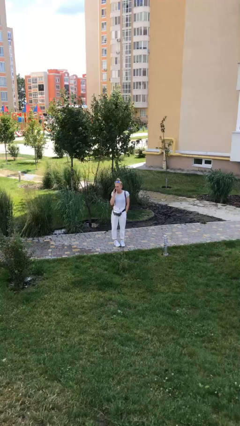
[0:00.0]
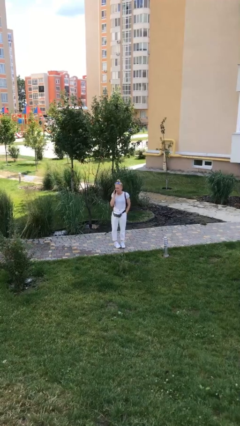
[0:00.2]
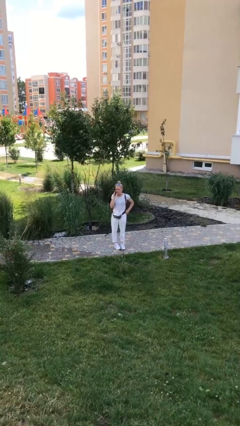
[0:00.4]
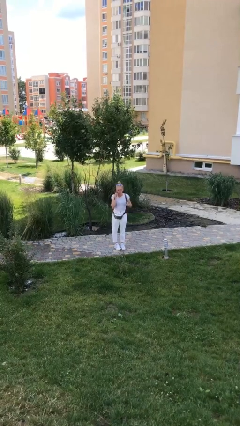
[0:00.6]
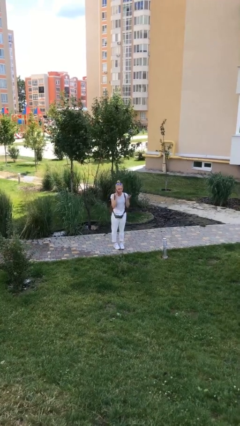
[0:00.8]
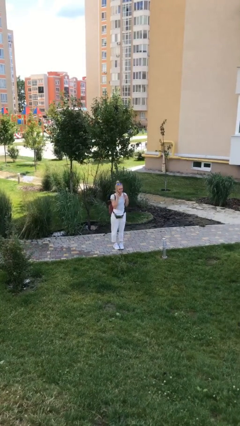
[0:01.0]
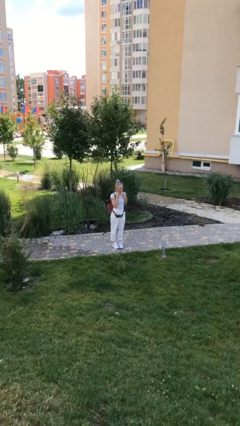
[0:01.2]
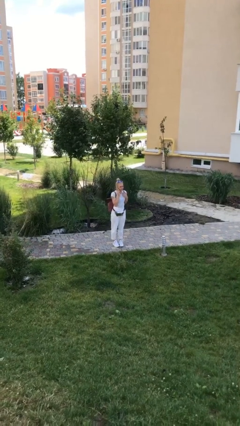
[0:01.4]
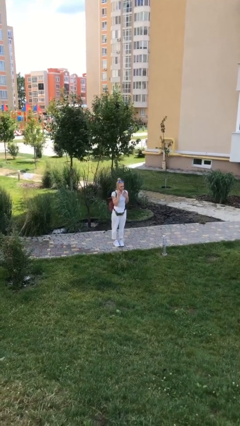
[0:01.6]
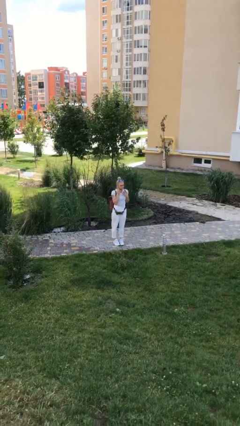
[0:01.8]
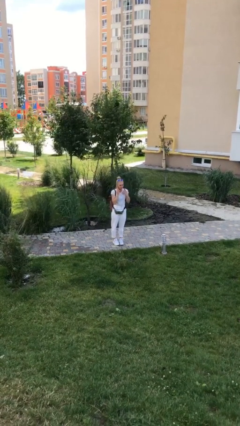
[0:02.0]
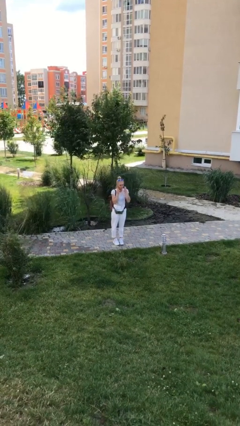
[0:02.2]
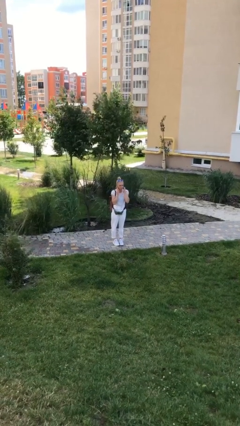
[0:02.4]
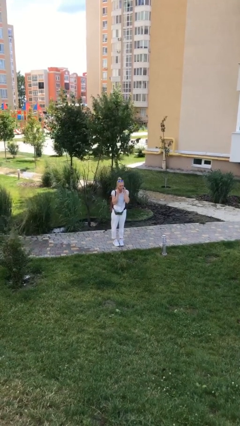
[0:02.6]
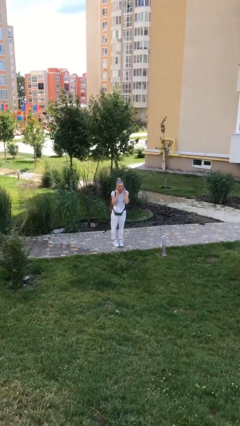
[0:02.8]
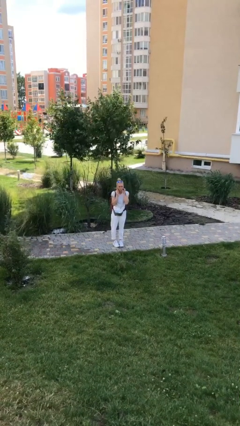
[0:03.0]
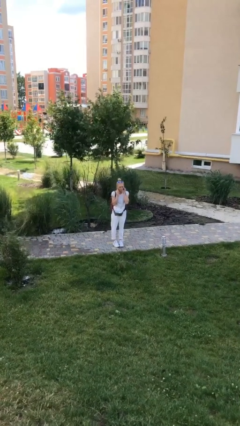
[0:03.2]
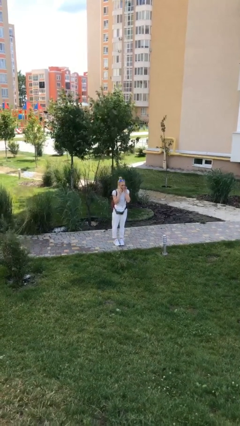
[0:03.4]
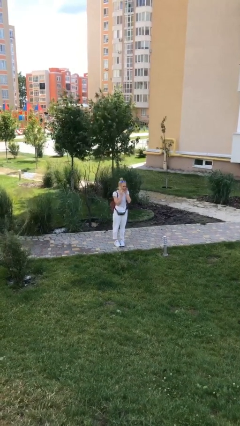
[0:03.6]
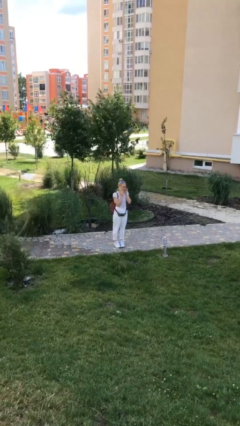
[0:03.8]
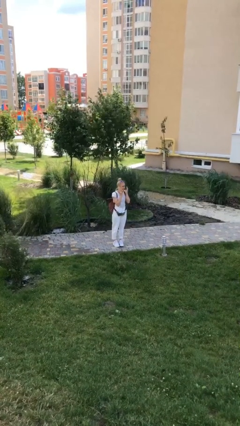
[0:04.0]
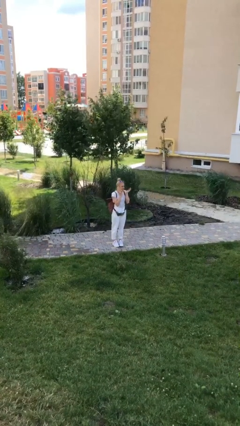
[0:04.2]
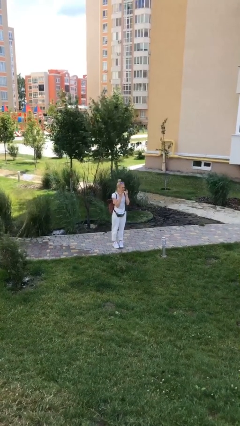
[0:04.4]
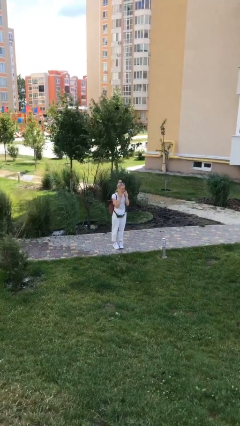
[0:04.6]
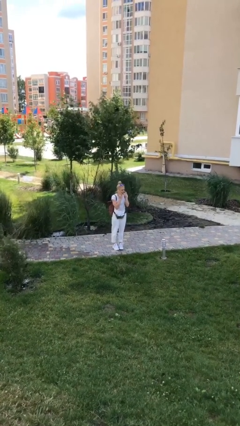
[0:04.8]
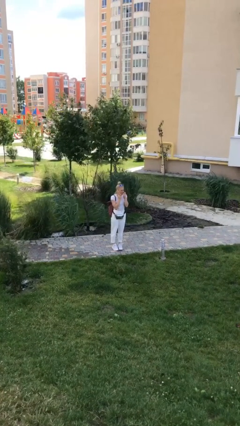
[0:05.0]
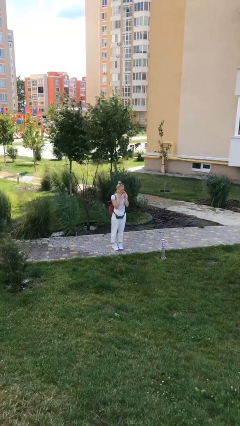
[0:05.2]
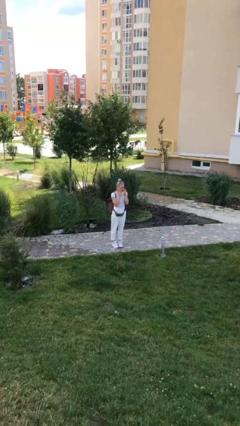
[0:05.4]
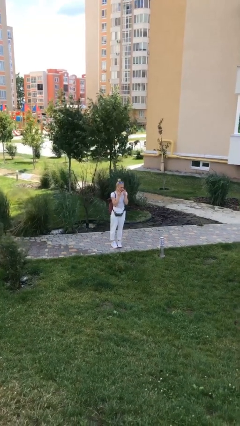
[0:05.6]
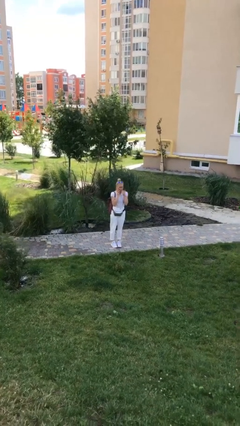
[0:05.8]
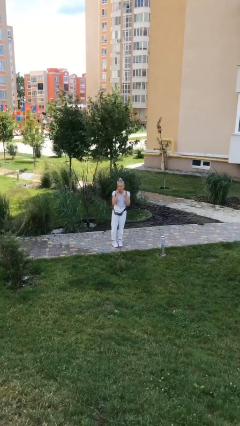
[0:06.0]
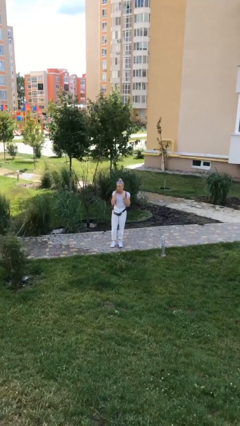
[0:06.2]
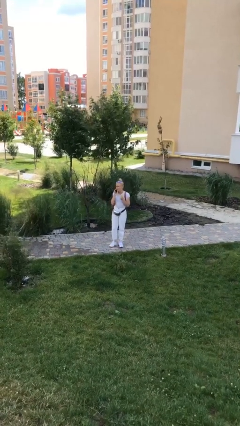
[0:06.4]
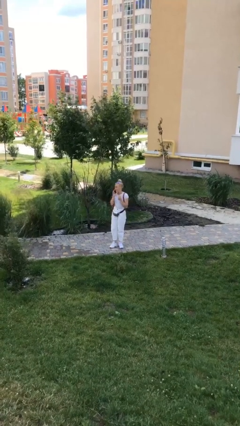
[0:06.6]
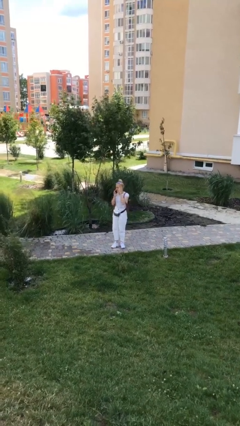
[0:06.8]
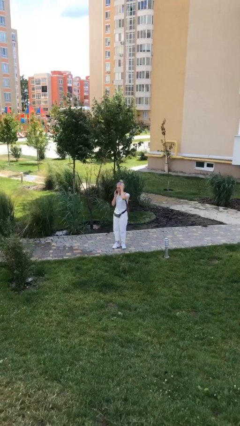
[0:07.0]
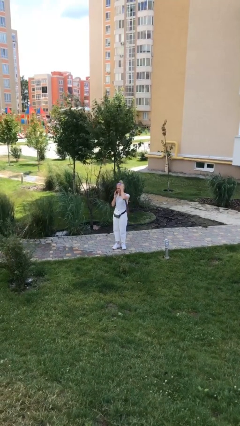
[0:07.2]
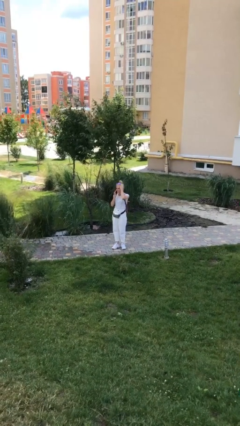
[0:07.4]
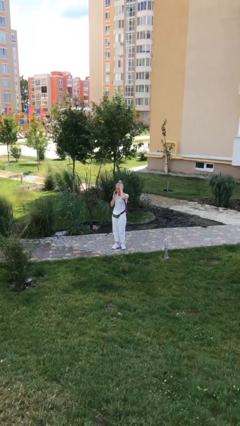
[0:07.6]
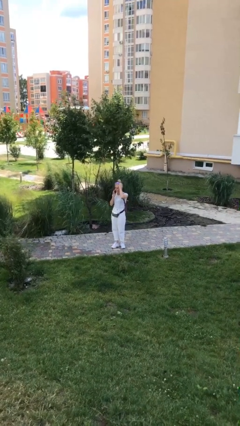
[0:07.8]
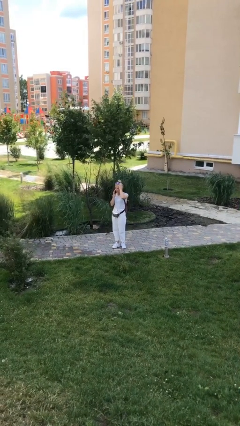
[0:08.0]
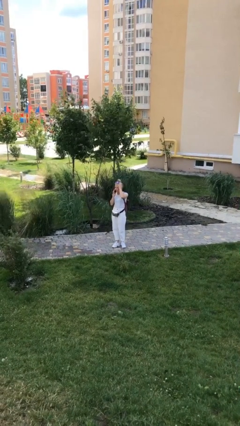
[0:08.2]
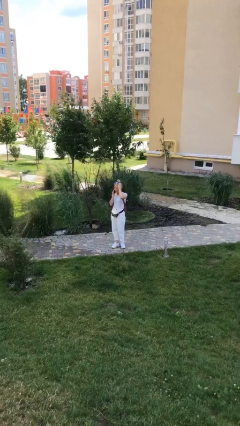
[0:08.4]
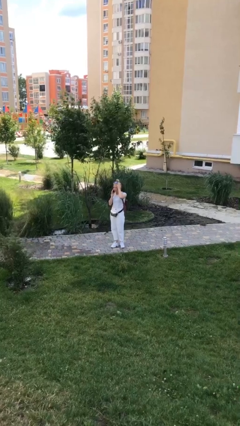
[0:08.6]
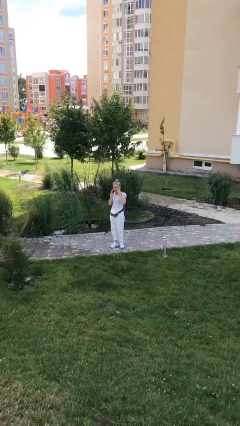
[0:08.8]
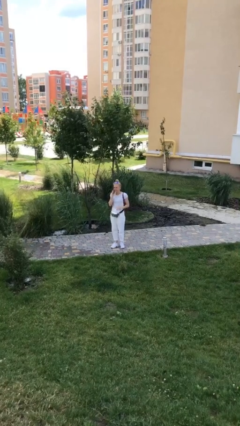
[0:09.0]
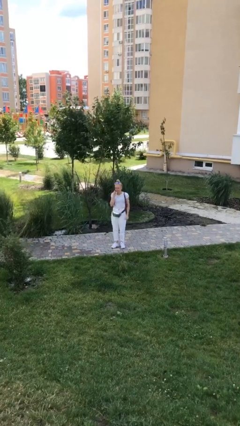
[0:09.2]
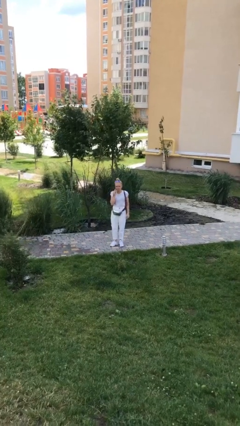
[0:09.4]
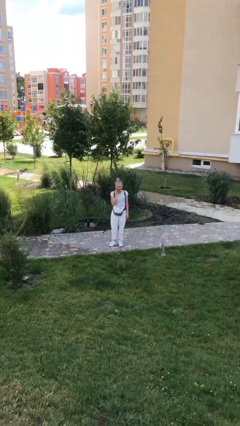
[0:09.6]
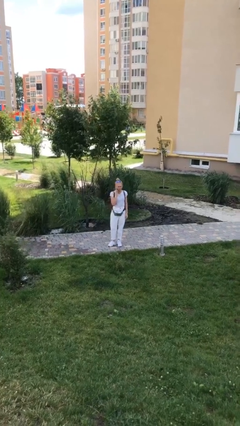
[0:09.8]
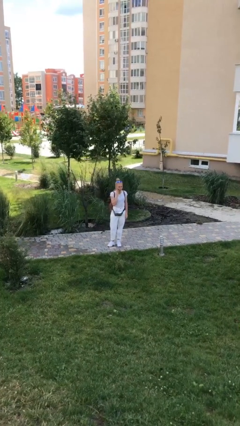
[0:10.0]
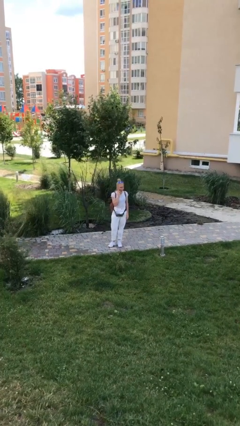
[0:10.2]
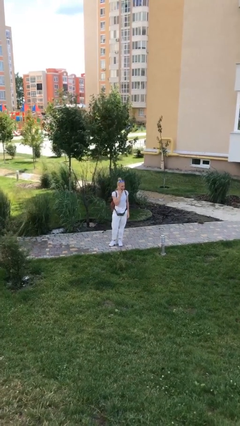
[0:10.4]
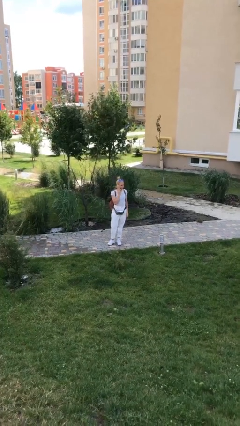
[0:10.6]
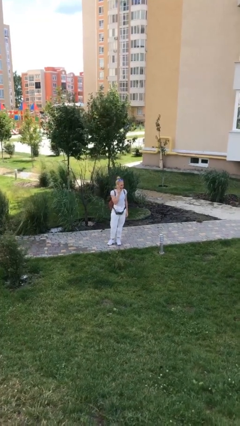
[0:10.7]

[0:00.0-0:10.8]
person talks on phone

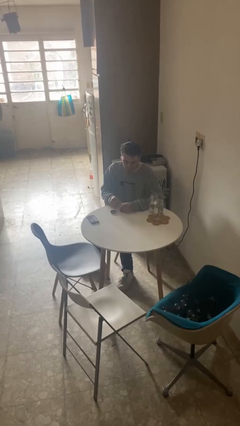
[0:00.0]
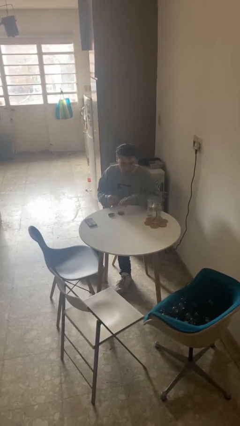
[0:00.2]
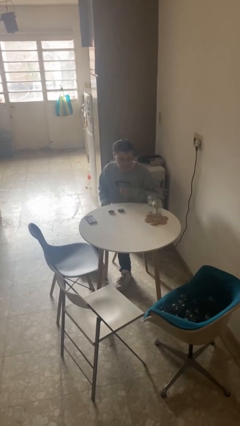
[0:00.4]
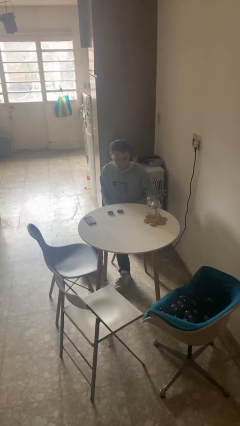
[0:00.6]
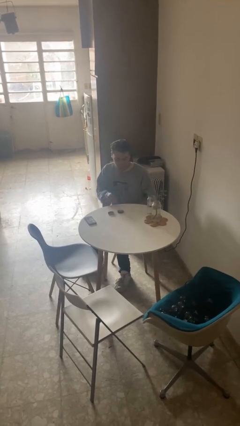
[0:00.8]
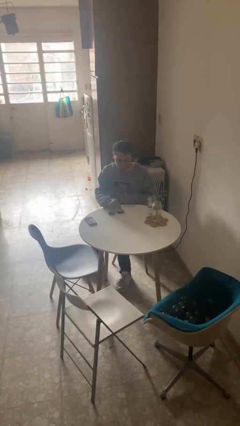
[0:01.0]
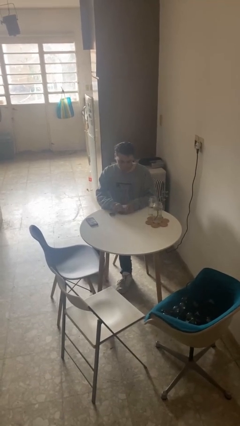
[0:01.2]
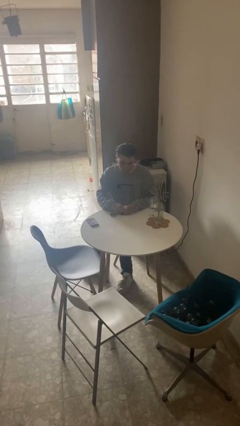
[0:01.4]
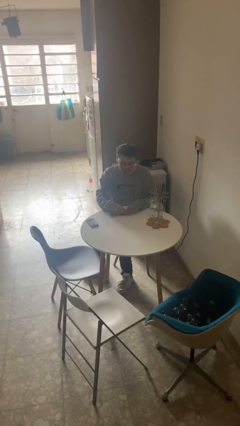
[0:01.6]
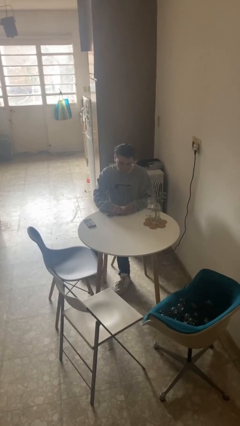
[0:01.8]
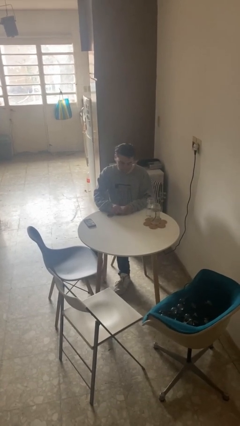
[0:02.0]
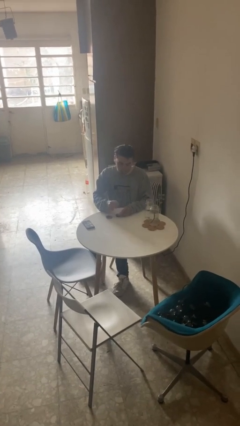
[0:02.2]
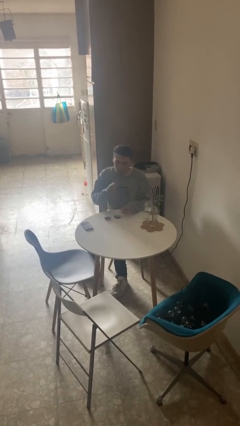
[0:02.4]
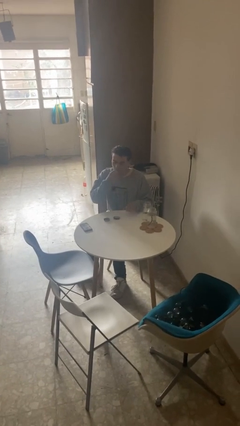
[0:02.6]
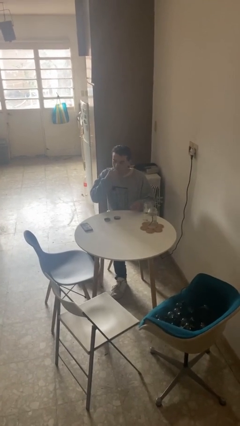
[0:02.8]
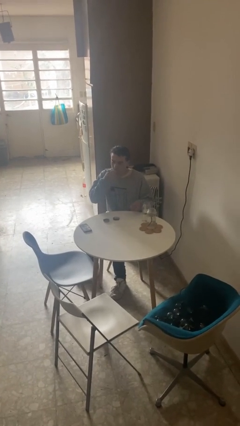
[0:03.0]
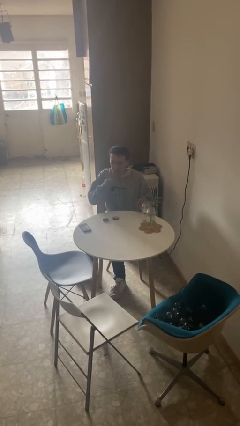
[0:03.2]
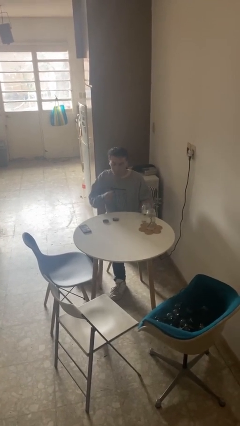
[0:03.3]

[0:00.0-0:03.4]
person takes medicine pills

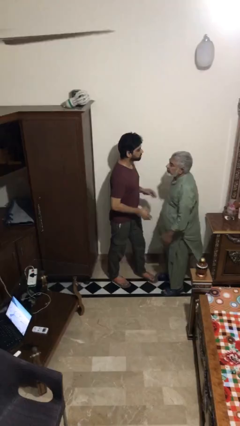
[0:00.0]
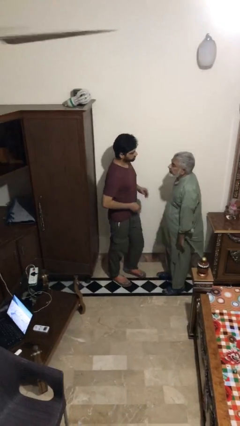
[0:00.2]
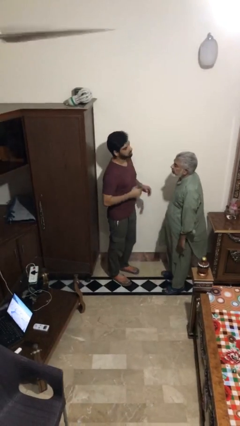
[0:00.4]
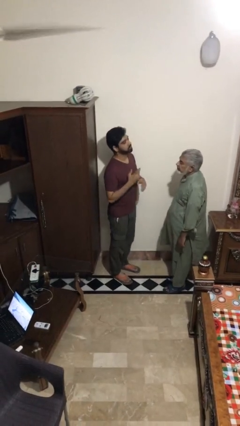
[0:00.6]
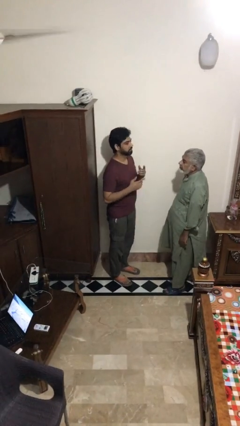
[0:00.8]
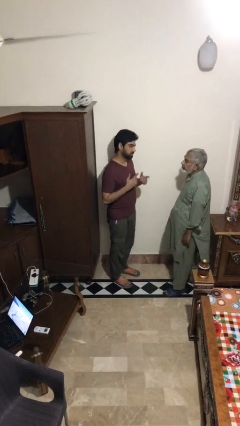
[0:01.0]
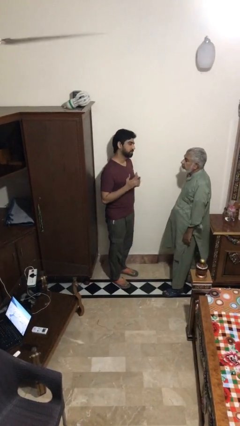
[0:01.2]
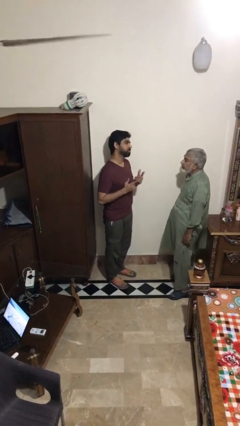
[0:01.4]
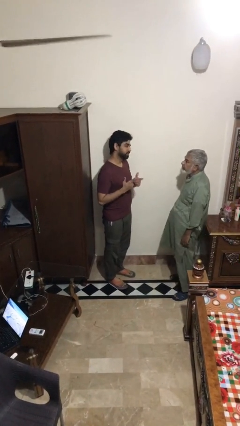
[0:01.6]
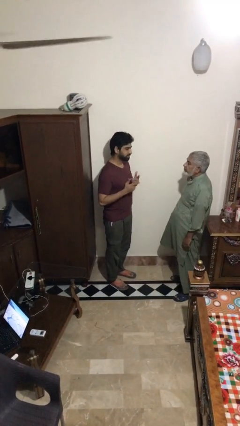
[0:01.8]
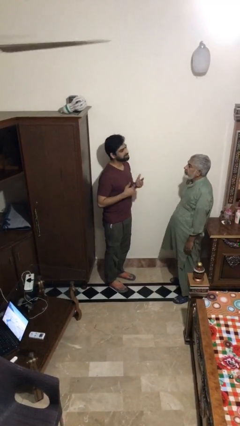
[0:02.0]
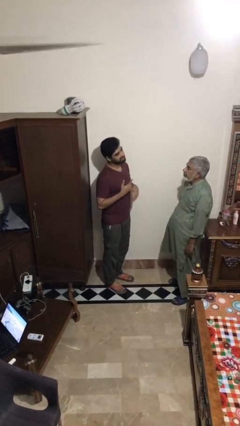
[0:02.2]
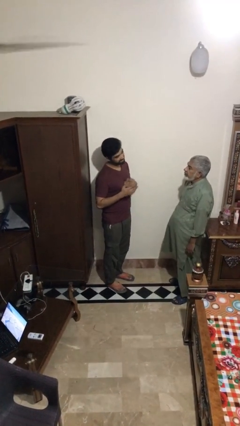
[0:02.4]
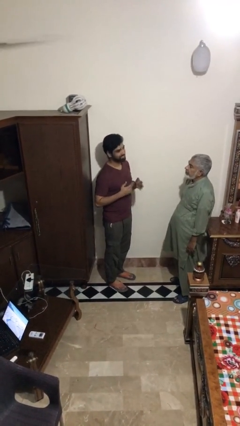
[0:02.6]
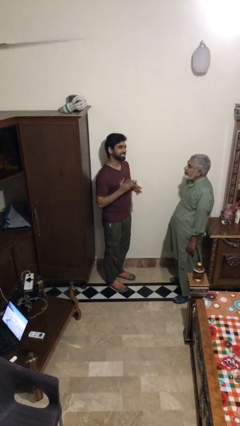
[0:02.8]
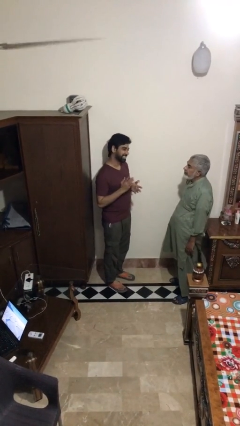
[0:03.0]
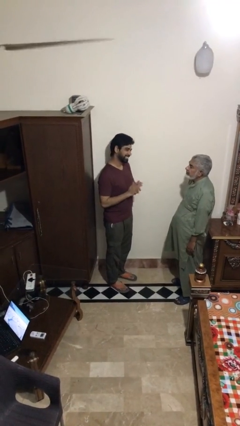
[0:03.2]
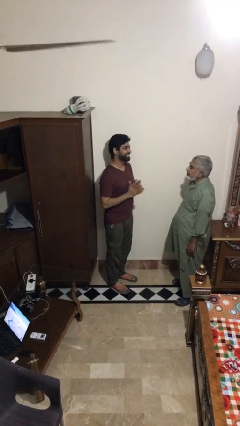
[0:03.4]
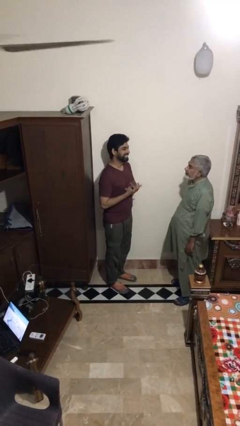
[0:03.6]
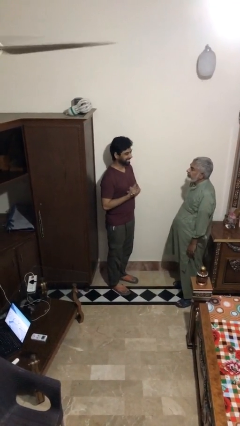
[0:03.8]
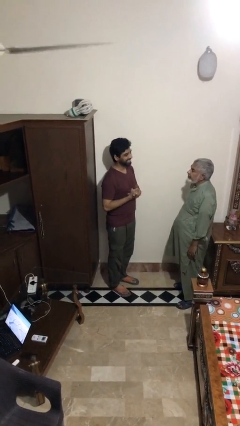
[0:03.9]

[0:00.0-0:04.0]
person talks to person
